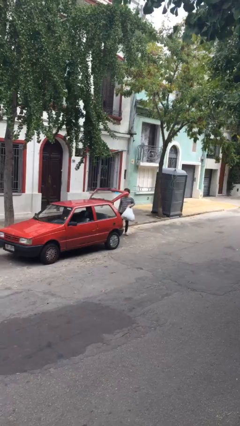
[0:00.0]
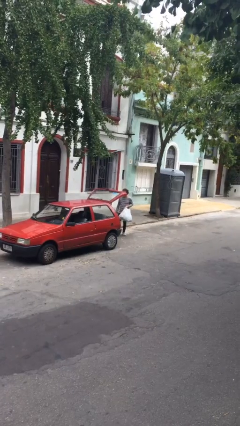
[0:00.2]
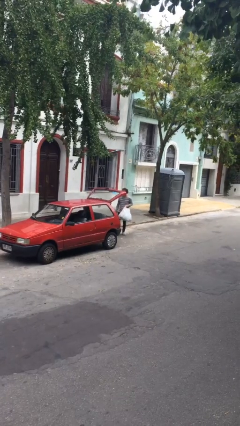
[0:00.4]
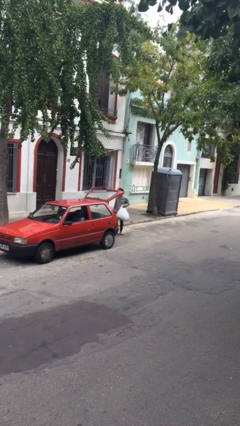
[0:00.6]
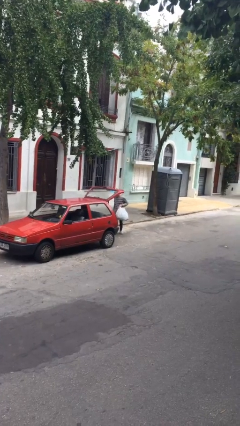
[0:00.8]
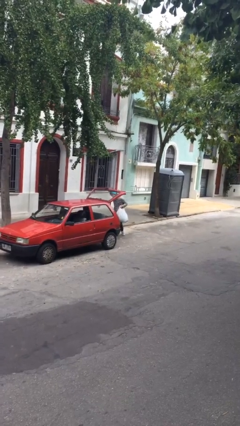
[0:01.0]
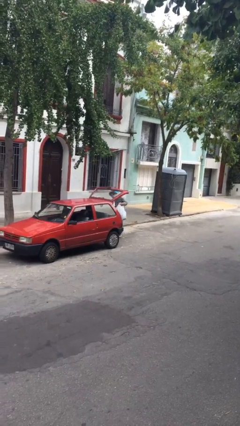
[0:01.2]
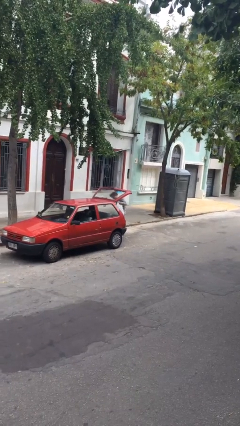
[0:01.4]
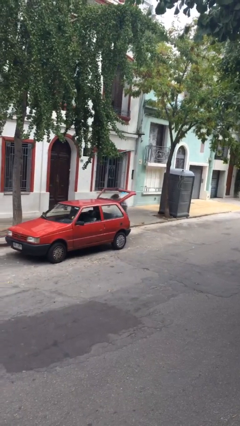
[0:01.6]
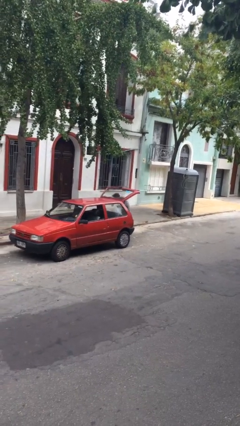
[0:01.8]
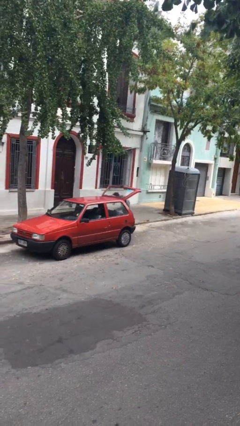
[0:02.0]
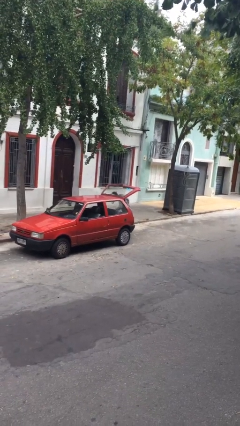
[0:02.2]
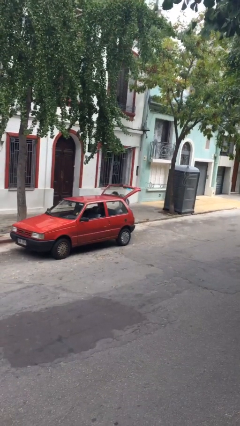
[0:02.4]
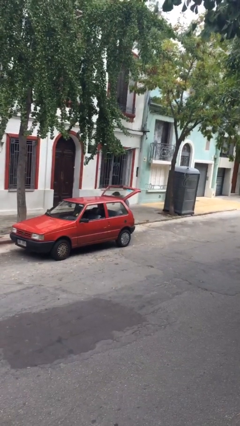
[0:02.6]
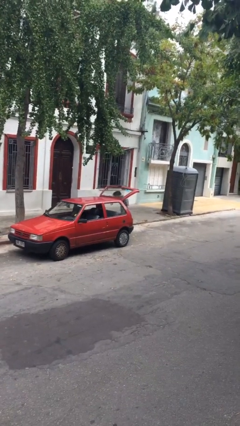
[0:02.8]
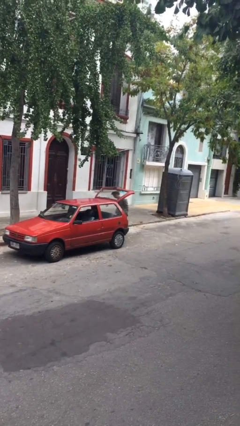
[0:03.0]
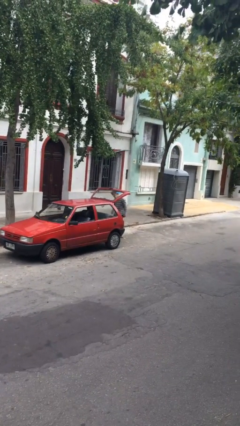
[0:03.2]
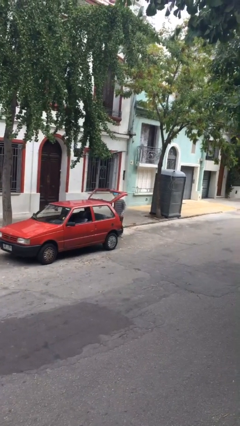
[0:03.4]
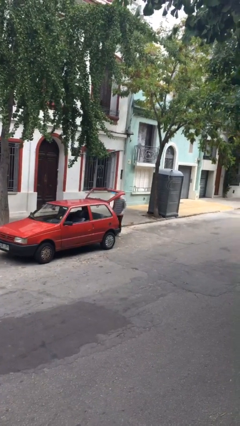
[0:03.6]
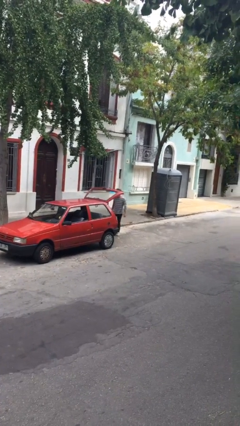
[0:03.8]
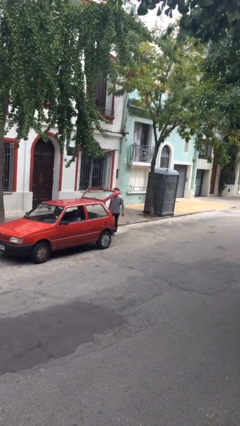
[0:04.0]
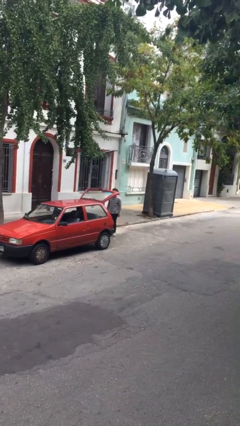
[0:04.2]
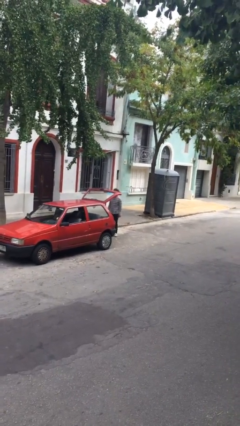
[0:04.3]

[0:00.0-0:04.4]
person loads car

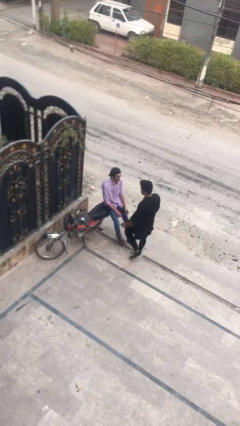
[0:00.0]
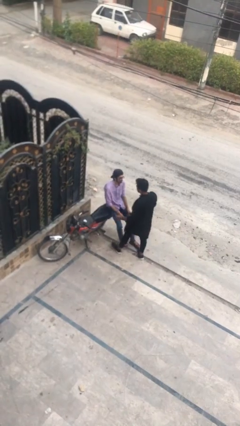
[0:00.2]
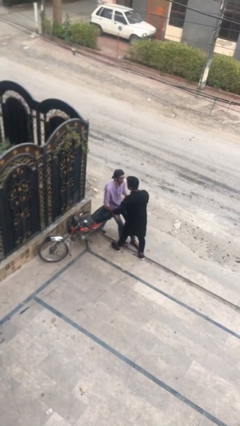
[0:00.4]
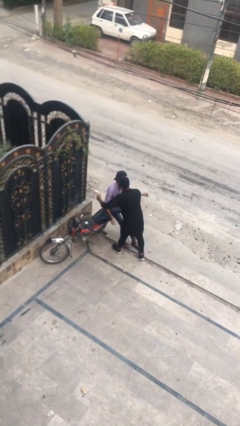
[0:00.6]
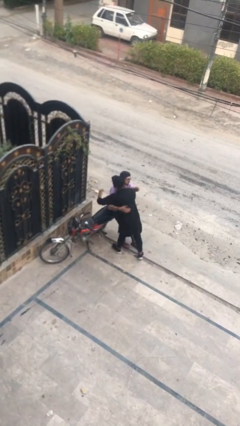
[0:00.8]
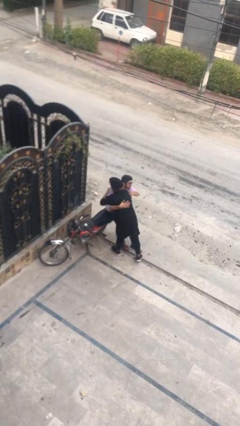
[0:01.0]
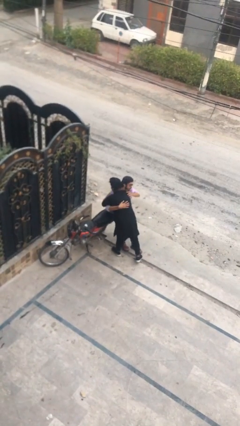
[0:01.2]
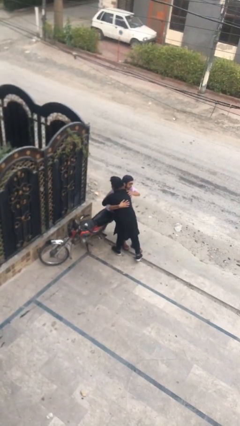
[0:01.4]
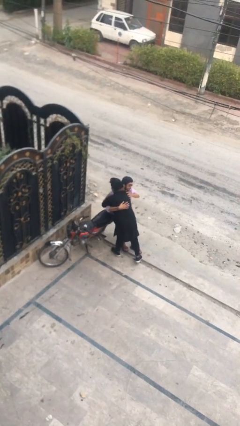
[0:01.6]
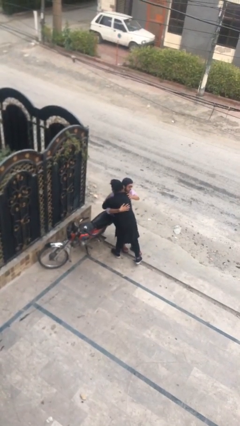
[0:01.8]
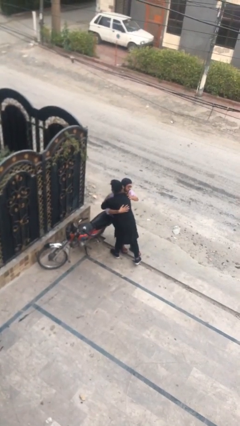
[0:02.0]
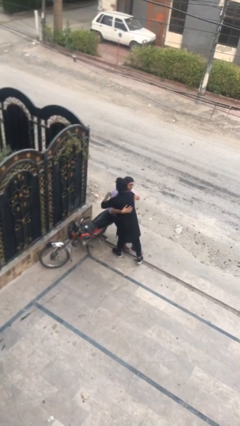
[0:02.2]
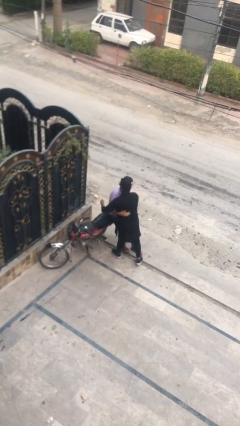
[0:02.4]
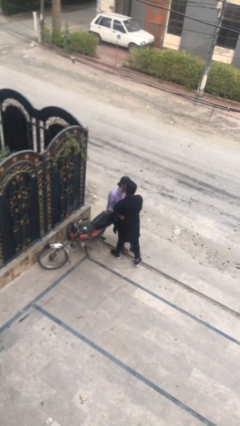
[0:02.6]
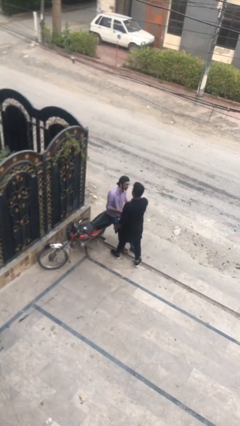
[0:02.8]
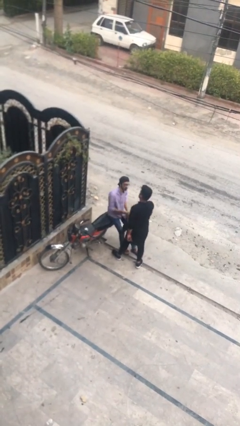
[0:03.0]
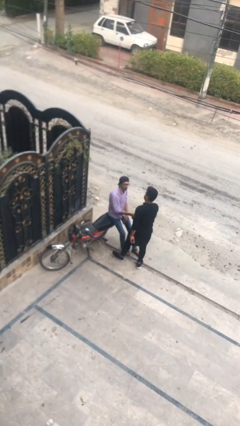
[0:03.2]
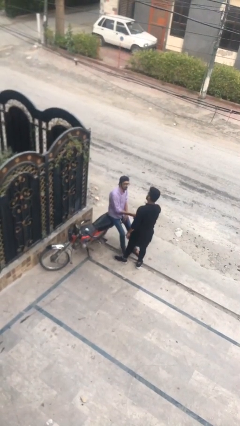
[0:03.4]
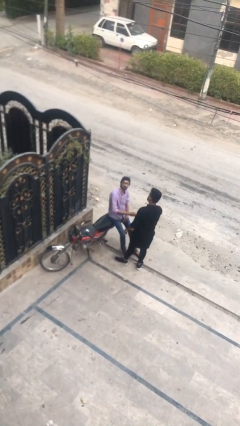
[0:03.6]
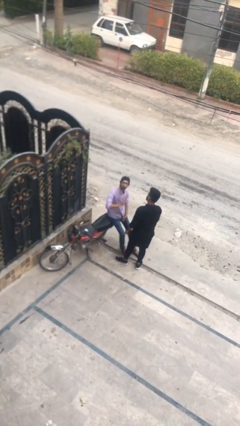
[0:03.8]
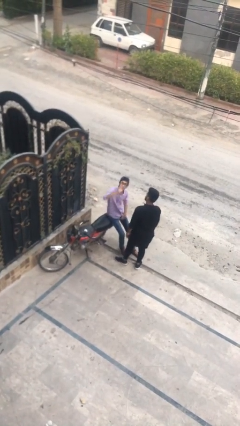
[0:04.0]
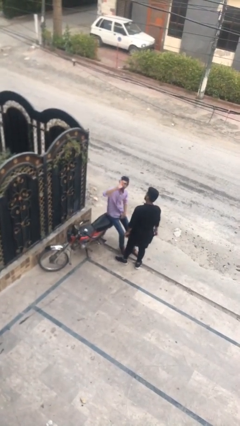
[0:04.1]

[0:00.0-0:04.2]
person embraces person

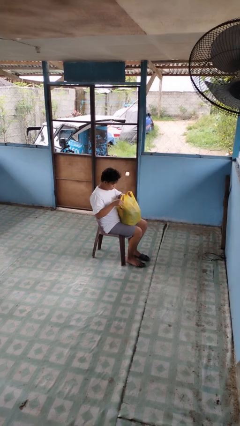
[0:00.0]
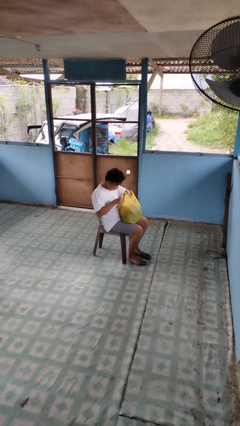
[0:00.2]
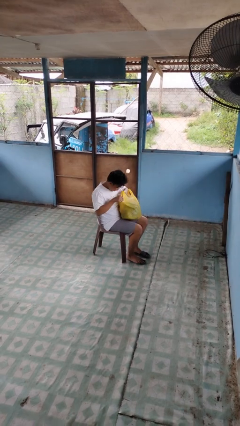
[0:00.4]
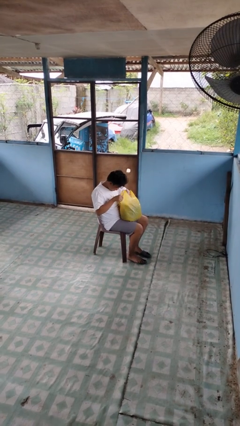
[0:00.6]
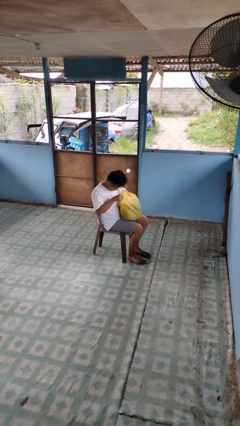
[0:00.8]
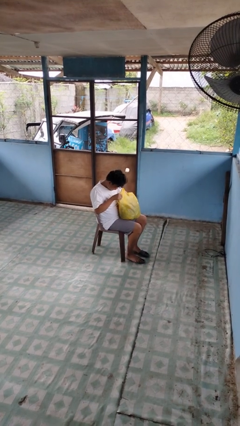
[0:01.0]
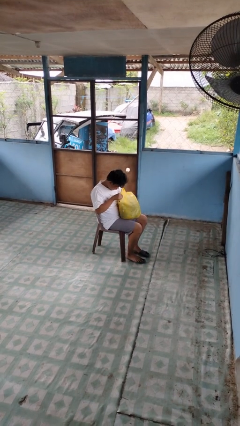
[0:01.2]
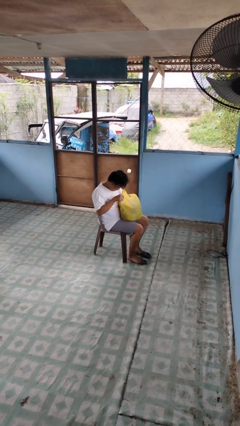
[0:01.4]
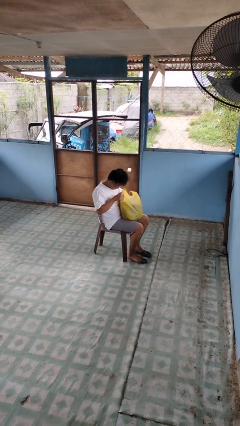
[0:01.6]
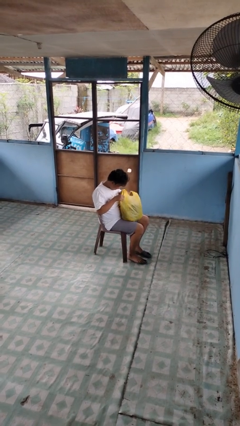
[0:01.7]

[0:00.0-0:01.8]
person searches in bag

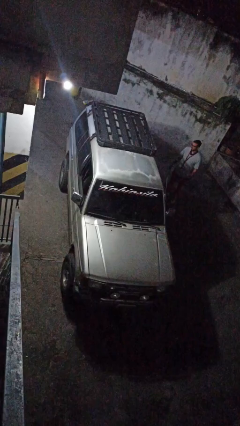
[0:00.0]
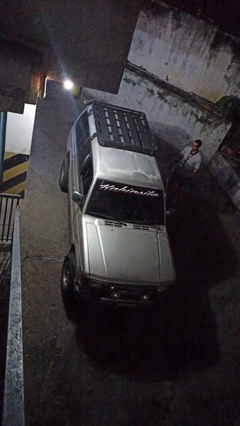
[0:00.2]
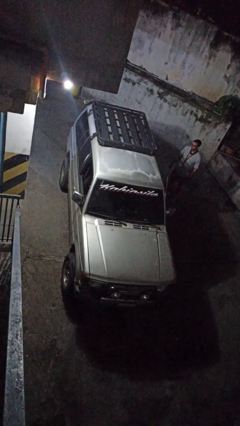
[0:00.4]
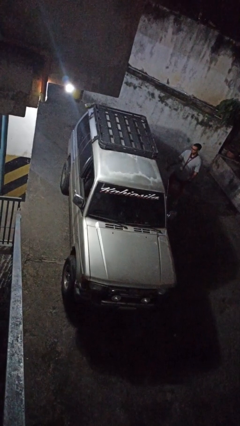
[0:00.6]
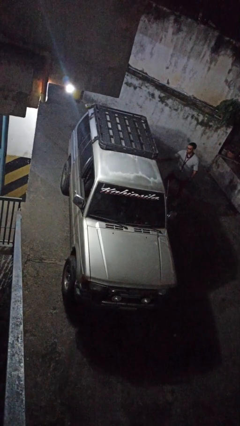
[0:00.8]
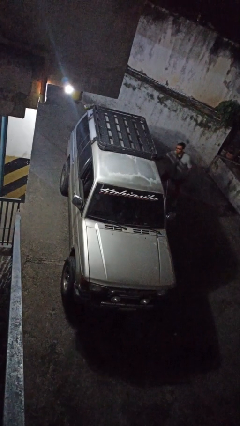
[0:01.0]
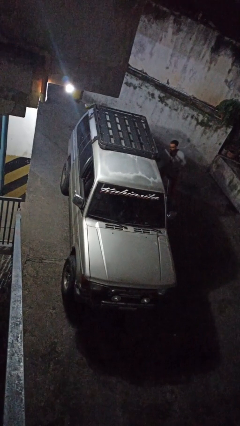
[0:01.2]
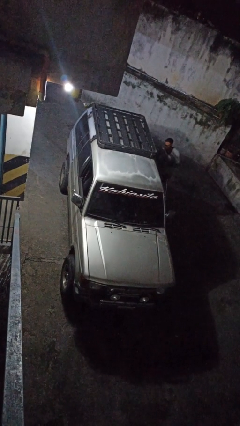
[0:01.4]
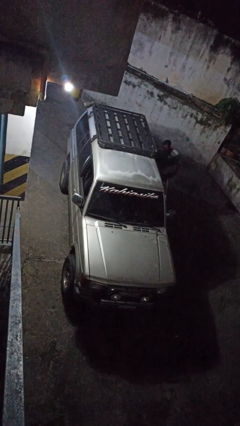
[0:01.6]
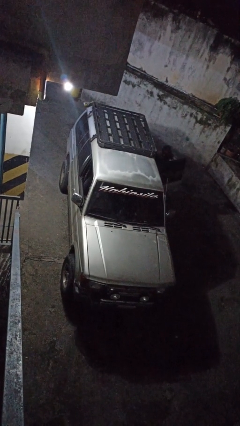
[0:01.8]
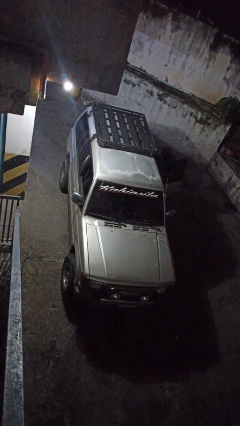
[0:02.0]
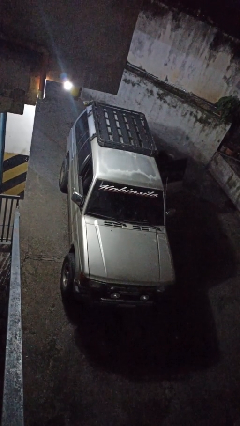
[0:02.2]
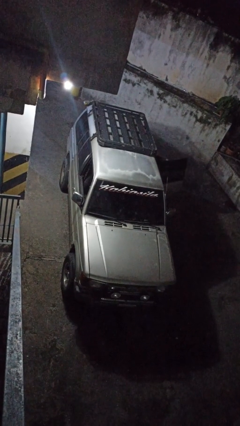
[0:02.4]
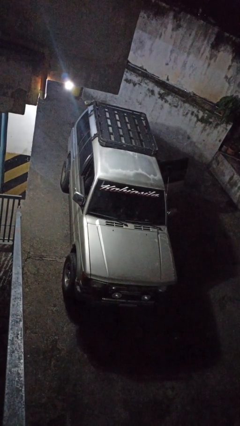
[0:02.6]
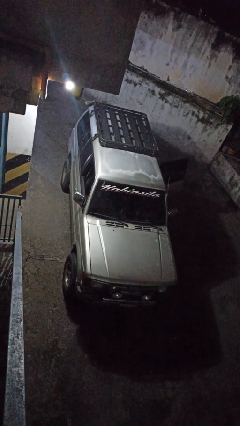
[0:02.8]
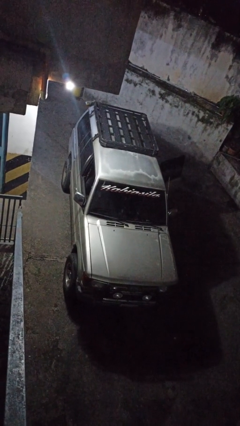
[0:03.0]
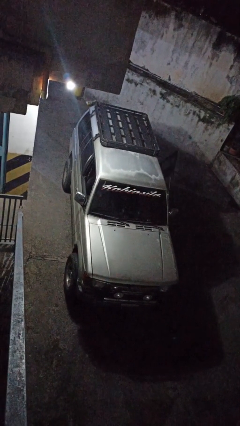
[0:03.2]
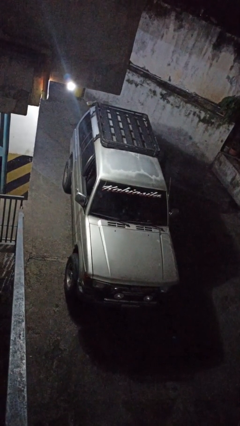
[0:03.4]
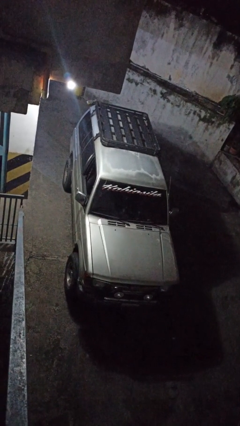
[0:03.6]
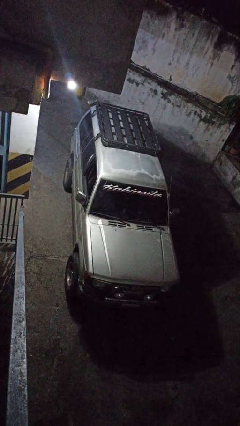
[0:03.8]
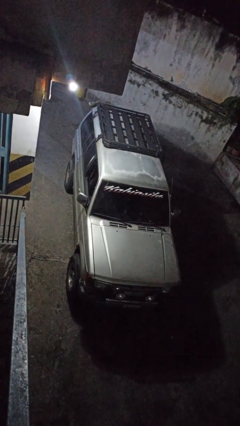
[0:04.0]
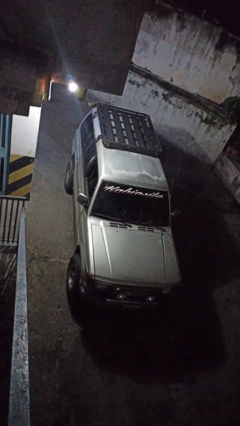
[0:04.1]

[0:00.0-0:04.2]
car picks up person

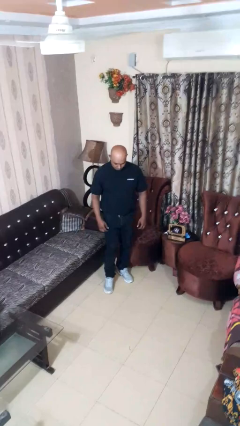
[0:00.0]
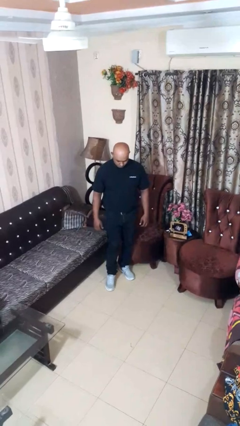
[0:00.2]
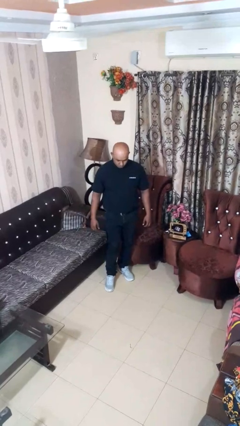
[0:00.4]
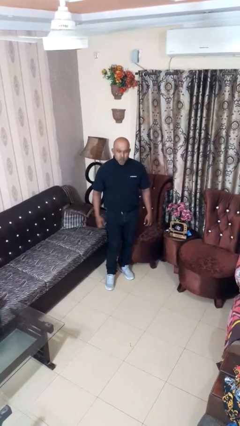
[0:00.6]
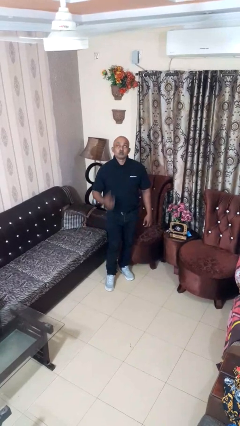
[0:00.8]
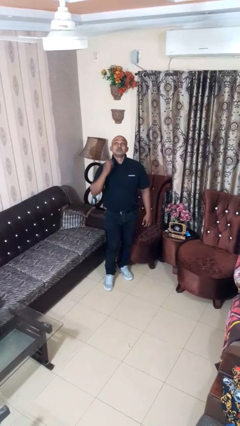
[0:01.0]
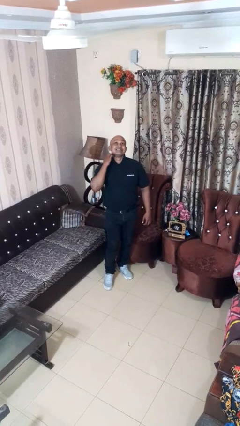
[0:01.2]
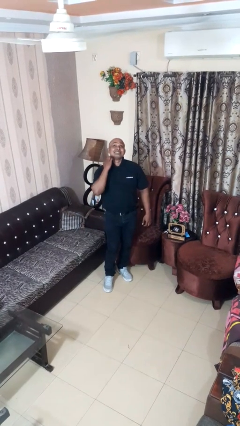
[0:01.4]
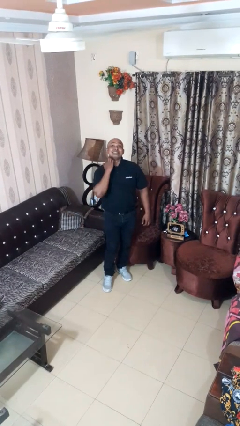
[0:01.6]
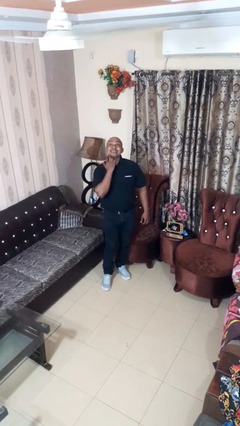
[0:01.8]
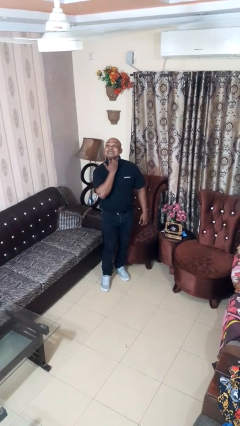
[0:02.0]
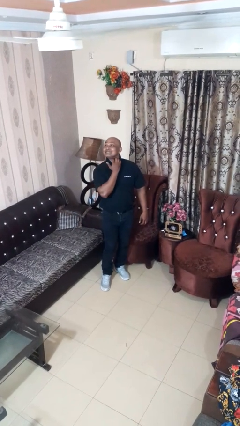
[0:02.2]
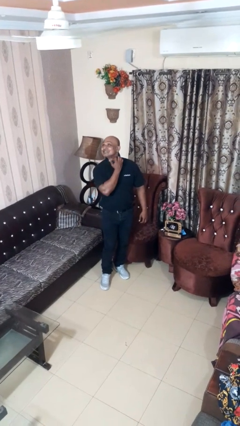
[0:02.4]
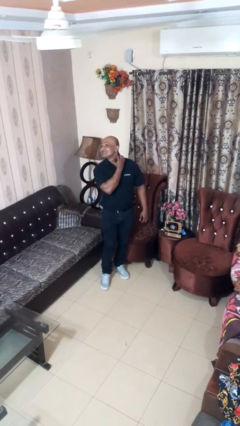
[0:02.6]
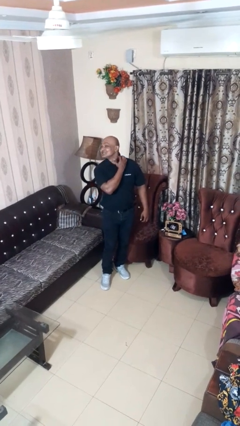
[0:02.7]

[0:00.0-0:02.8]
person gestures cut
